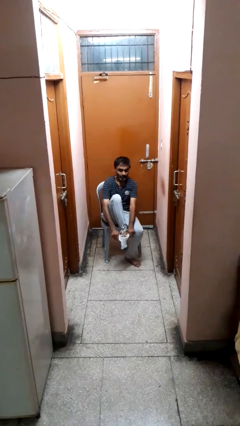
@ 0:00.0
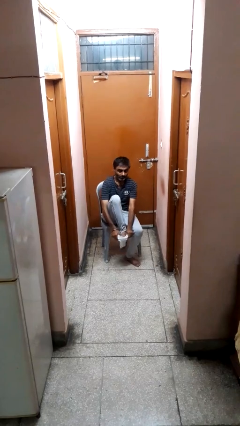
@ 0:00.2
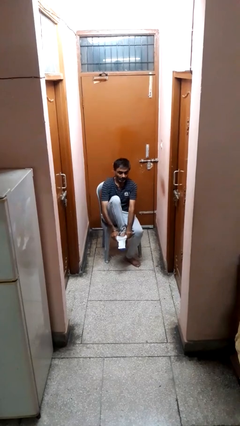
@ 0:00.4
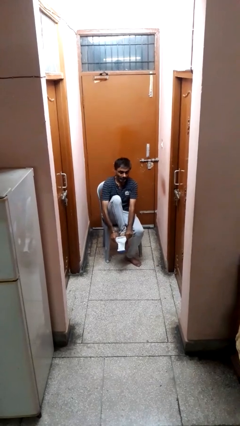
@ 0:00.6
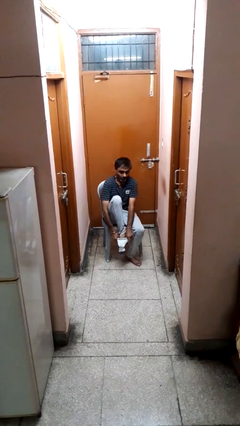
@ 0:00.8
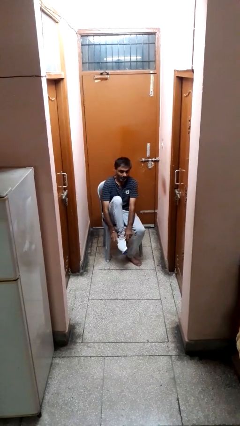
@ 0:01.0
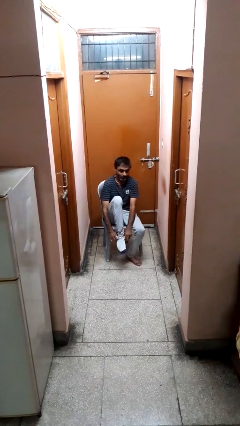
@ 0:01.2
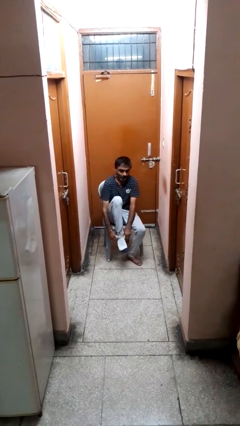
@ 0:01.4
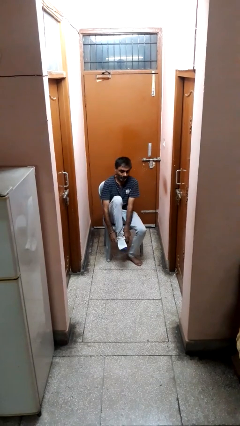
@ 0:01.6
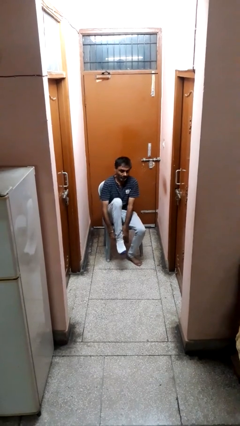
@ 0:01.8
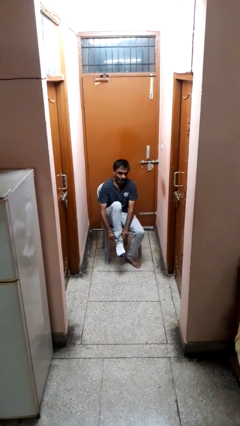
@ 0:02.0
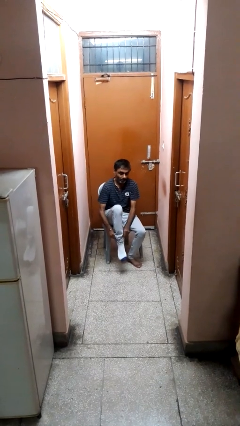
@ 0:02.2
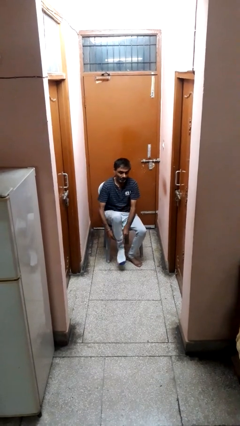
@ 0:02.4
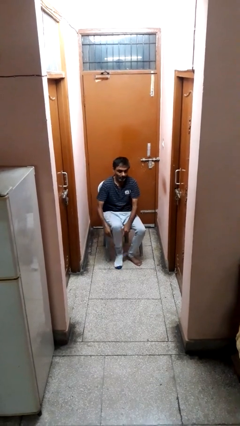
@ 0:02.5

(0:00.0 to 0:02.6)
person puts on socks

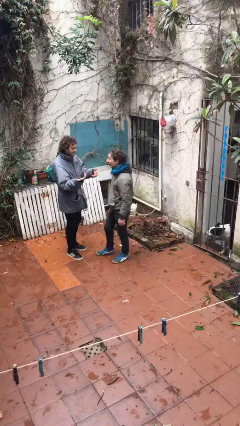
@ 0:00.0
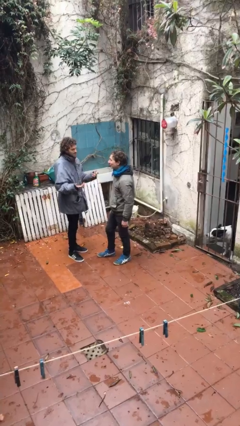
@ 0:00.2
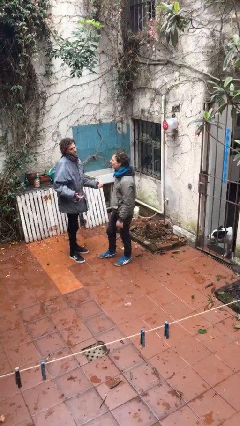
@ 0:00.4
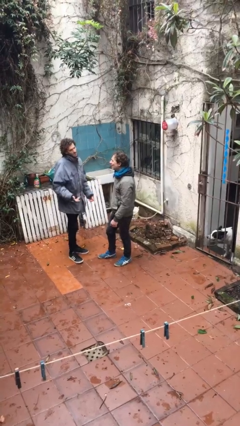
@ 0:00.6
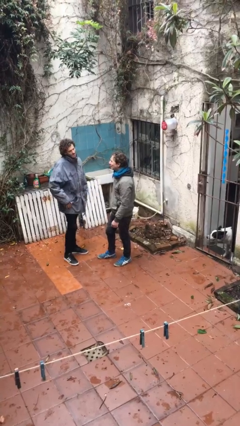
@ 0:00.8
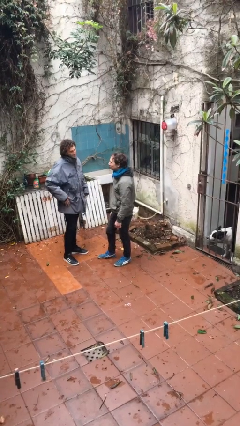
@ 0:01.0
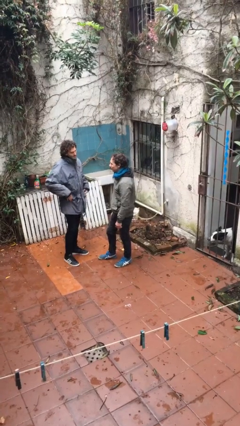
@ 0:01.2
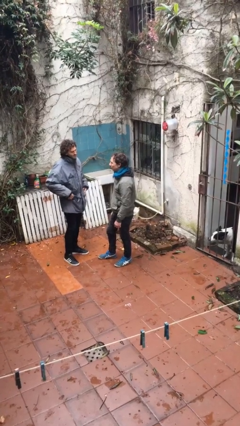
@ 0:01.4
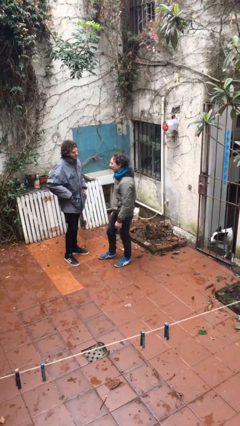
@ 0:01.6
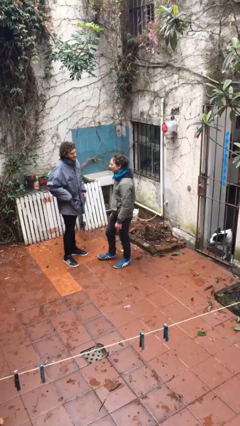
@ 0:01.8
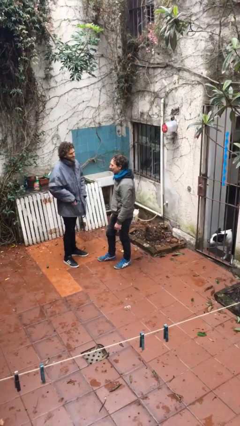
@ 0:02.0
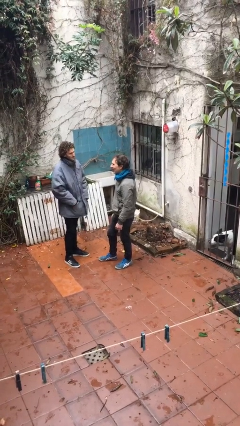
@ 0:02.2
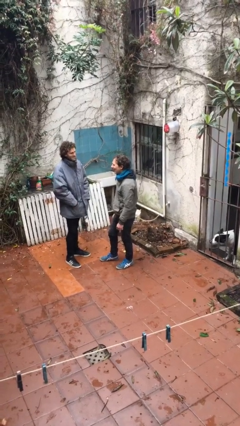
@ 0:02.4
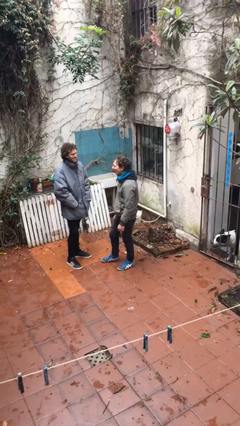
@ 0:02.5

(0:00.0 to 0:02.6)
person talks to person

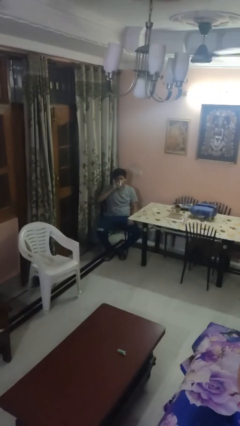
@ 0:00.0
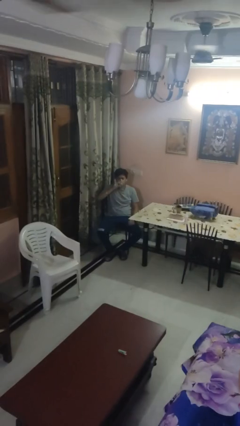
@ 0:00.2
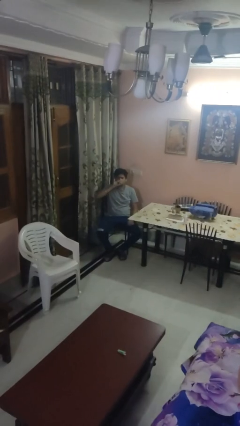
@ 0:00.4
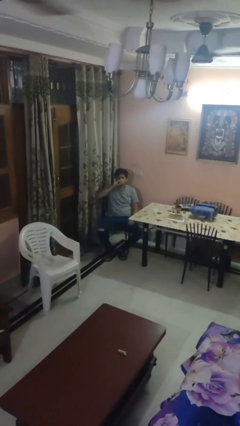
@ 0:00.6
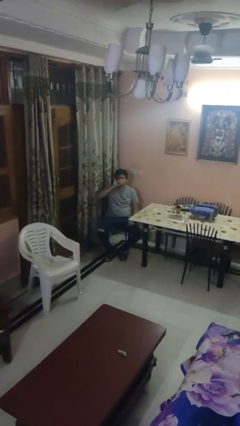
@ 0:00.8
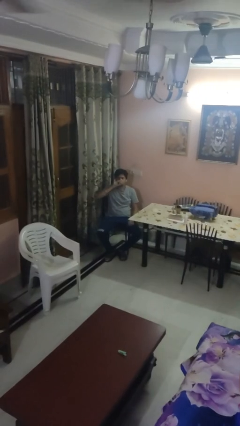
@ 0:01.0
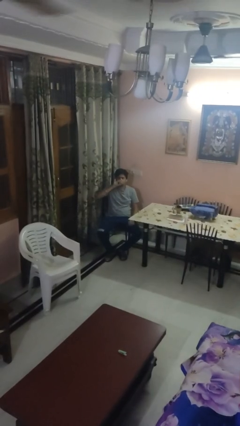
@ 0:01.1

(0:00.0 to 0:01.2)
person drinks from shotglass

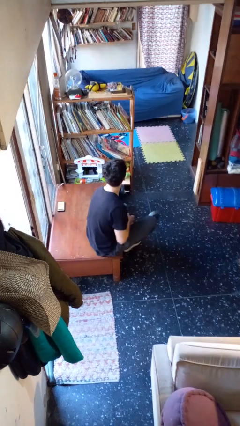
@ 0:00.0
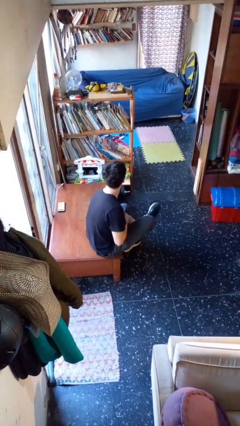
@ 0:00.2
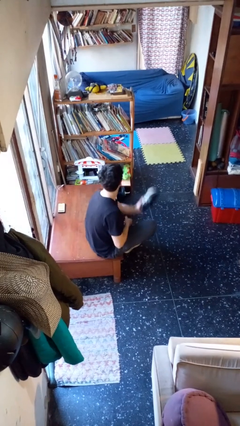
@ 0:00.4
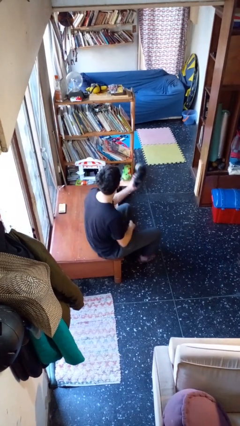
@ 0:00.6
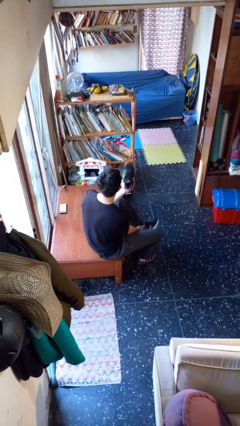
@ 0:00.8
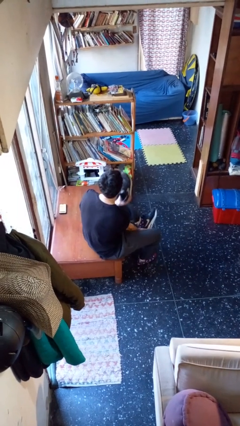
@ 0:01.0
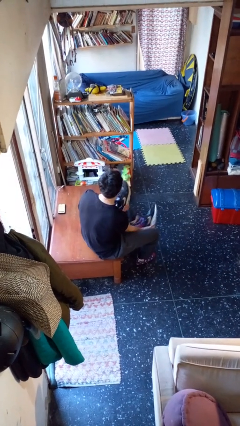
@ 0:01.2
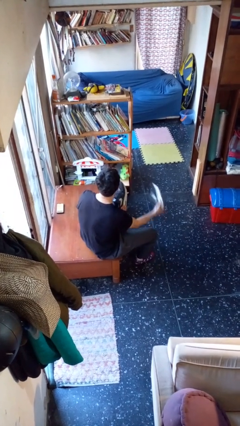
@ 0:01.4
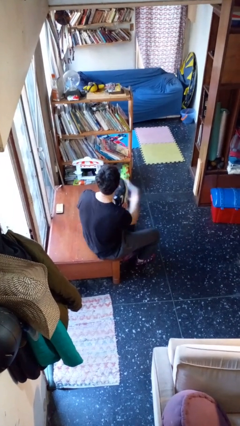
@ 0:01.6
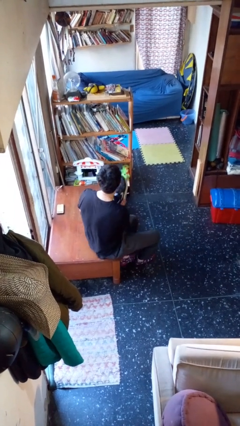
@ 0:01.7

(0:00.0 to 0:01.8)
person takes off shoes

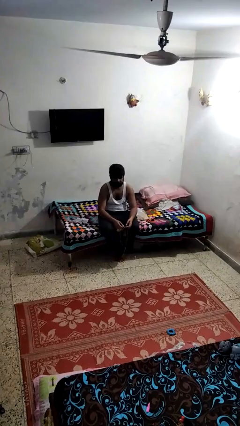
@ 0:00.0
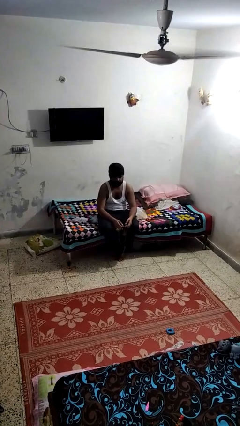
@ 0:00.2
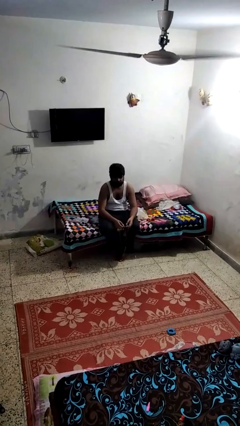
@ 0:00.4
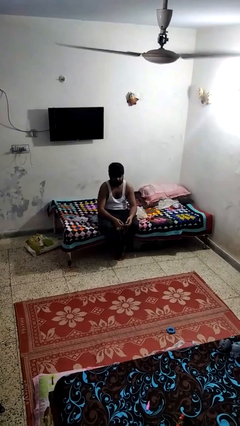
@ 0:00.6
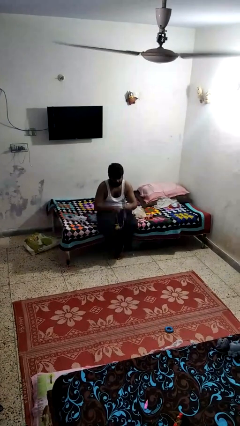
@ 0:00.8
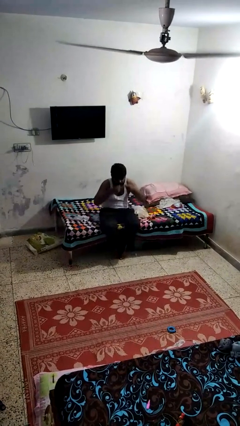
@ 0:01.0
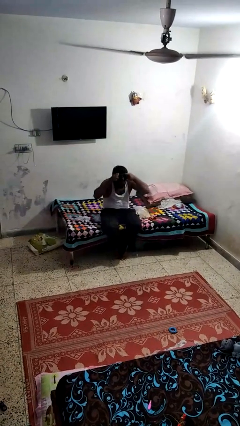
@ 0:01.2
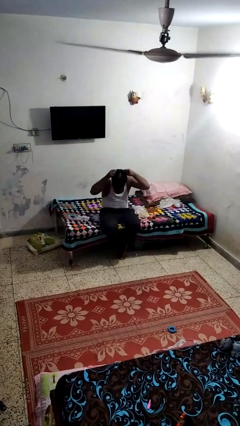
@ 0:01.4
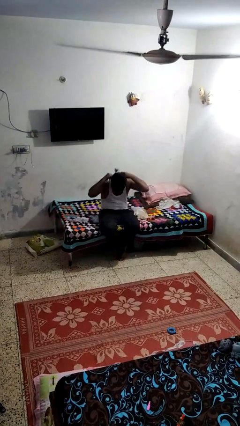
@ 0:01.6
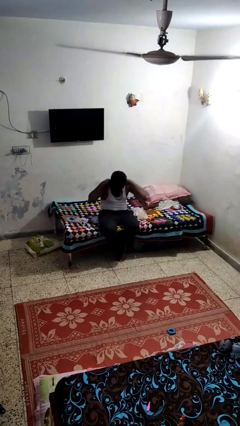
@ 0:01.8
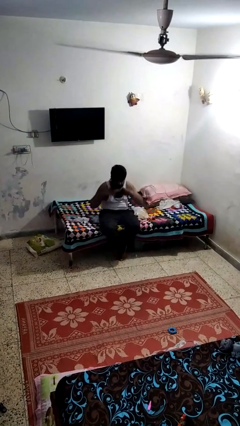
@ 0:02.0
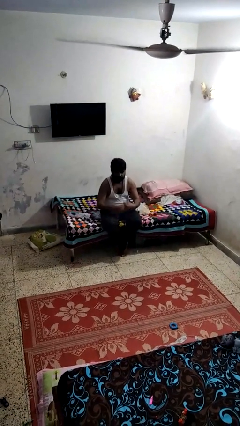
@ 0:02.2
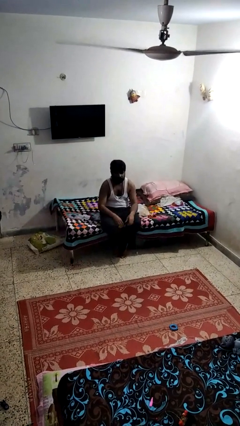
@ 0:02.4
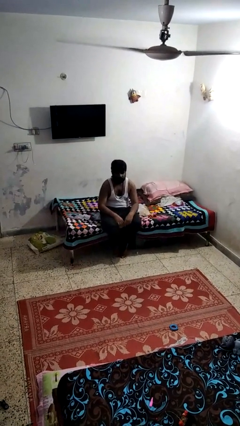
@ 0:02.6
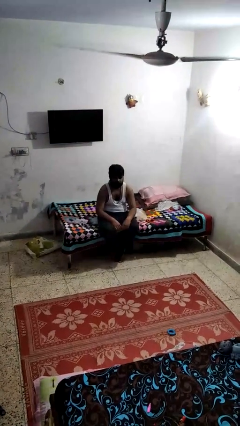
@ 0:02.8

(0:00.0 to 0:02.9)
person puts on necklace

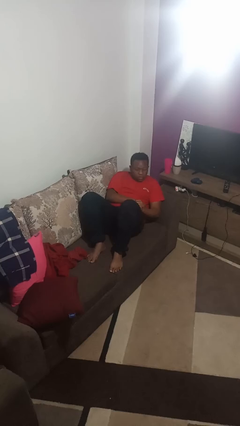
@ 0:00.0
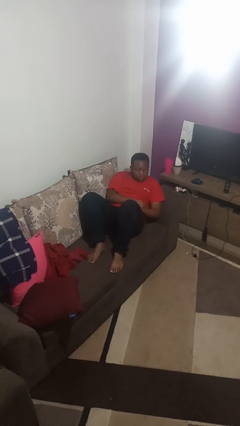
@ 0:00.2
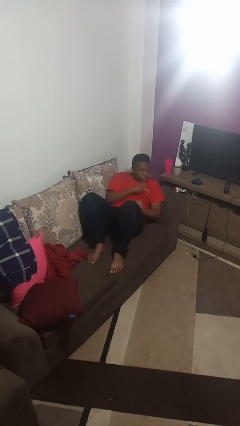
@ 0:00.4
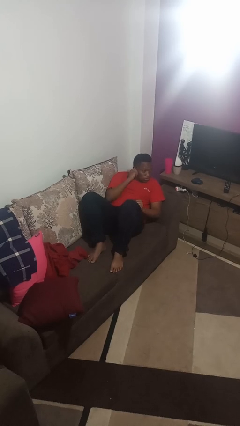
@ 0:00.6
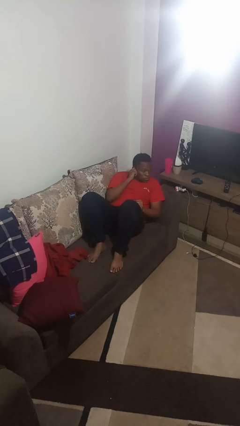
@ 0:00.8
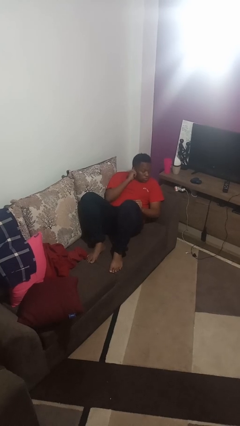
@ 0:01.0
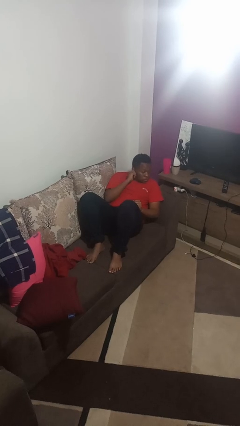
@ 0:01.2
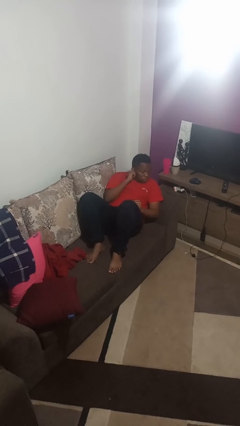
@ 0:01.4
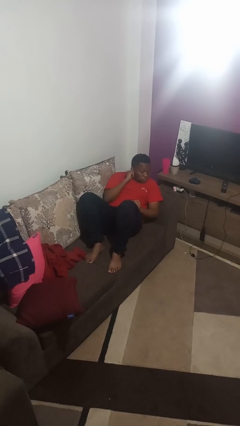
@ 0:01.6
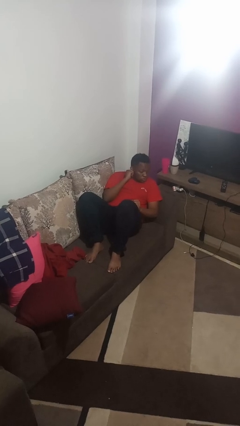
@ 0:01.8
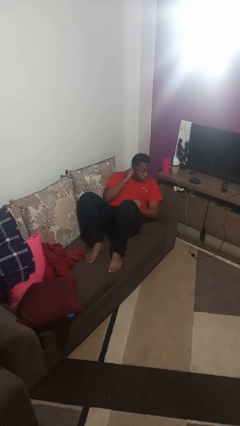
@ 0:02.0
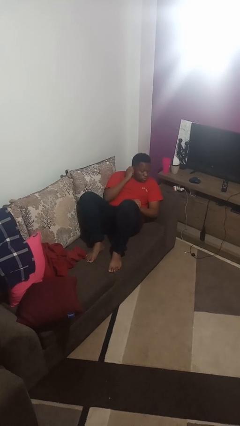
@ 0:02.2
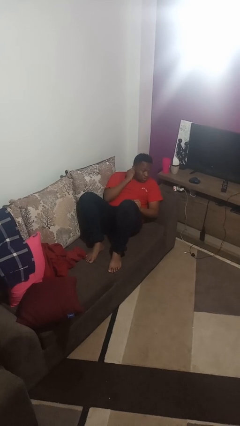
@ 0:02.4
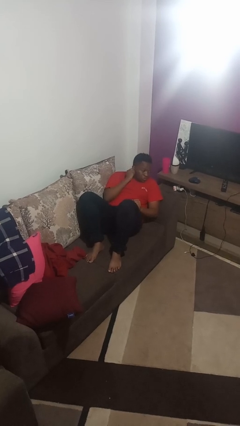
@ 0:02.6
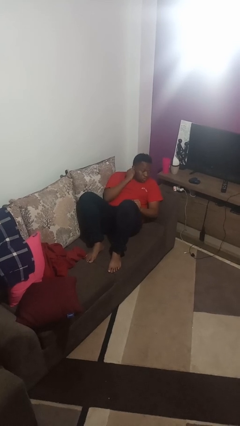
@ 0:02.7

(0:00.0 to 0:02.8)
person touches earlobe

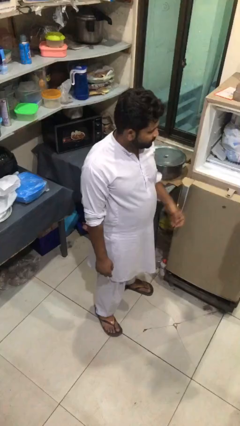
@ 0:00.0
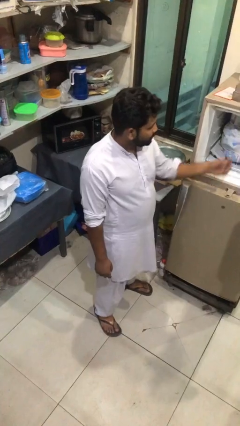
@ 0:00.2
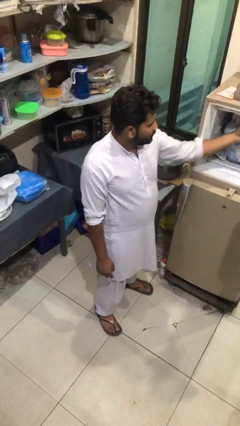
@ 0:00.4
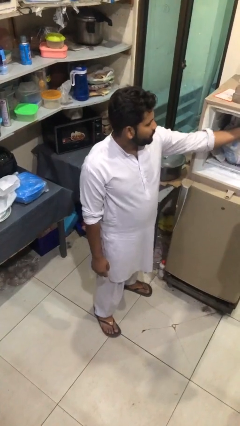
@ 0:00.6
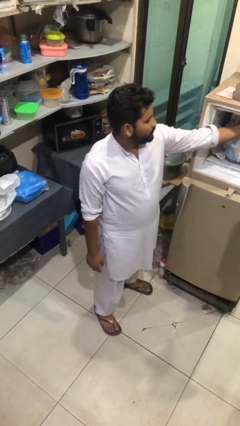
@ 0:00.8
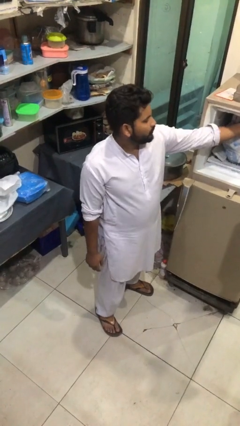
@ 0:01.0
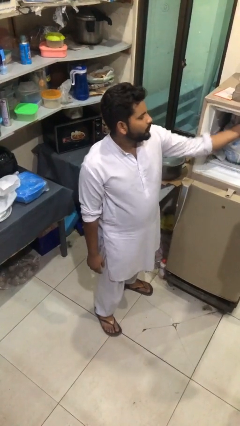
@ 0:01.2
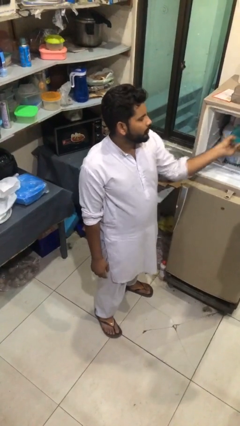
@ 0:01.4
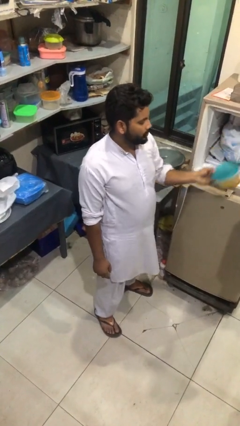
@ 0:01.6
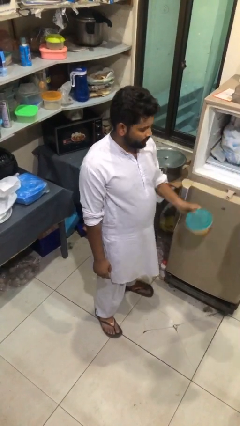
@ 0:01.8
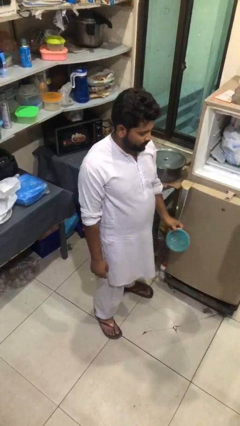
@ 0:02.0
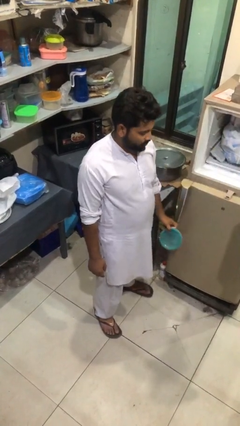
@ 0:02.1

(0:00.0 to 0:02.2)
person takes object from refrigerator

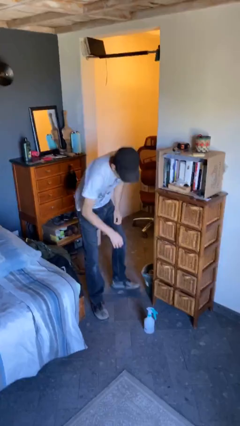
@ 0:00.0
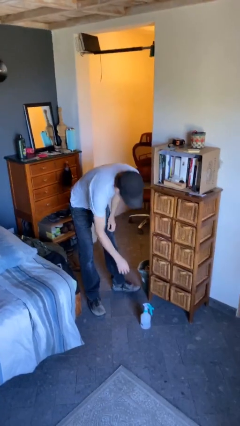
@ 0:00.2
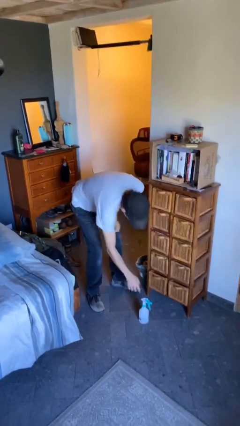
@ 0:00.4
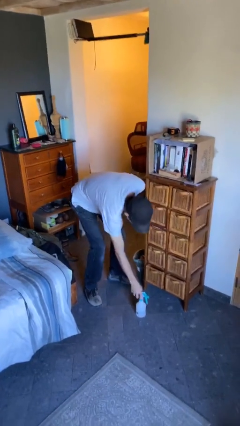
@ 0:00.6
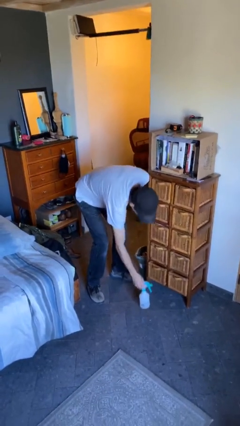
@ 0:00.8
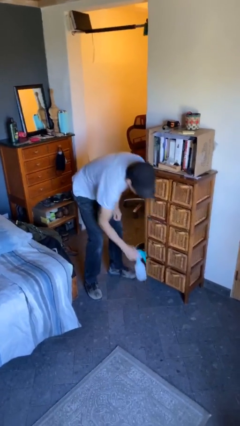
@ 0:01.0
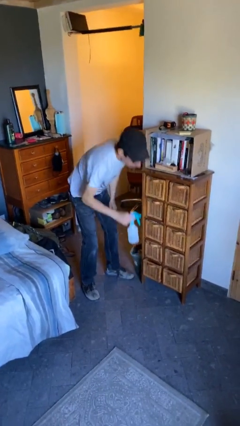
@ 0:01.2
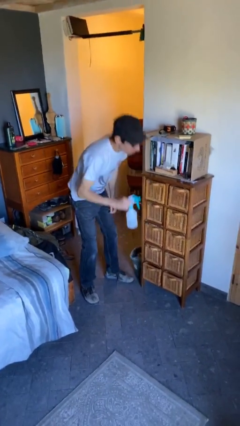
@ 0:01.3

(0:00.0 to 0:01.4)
person picks up object from floor
